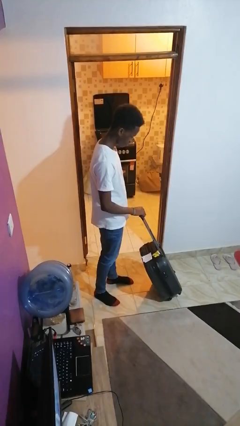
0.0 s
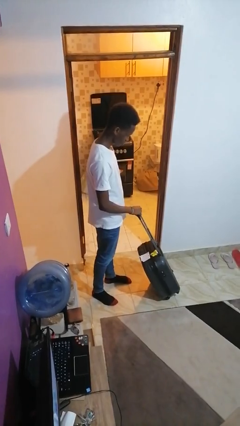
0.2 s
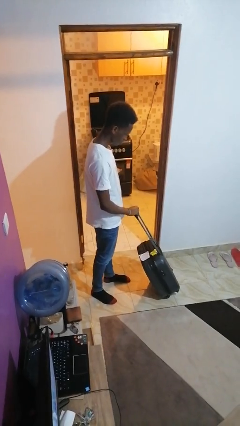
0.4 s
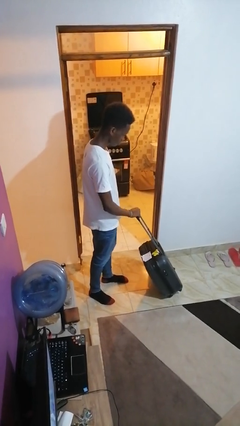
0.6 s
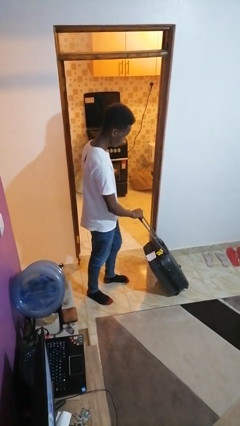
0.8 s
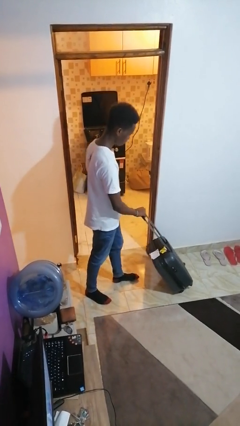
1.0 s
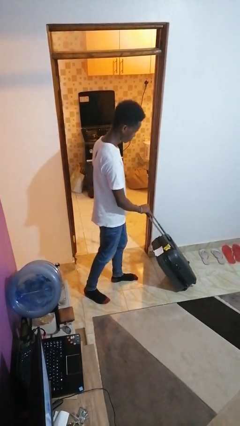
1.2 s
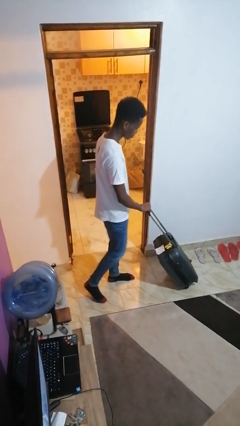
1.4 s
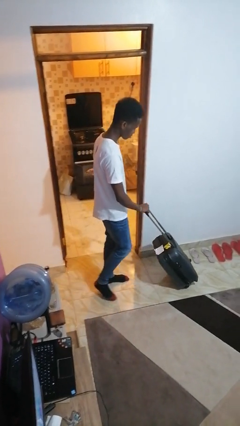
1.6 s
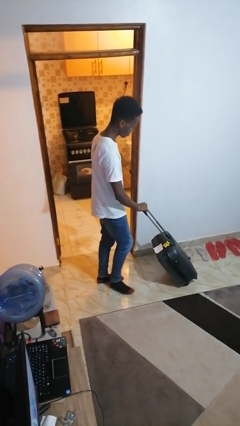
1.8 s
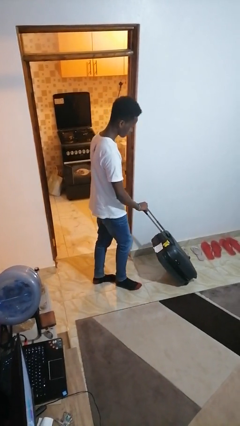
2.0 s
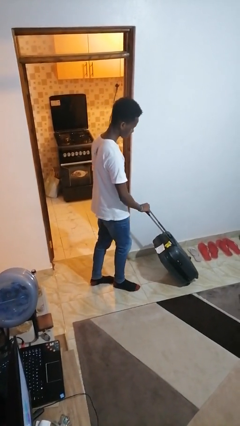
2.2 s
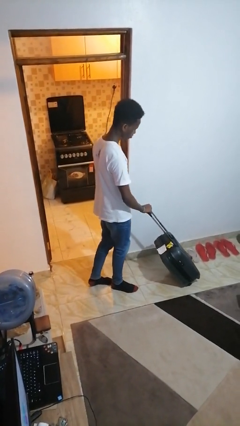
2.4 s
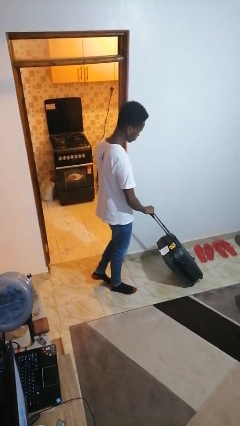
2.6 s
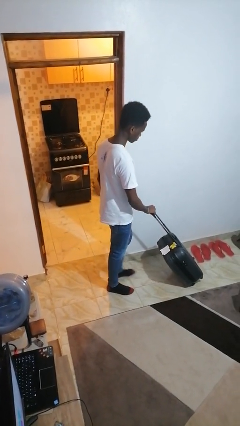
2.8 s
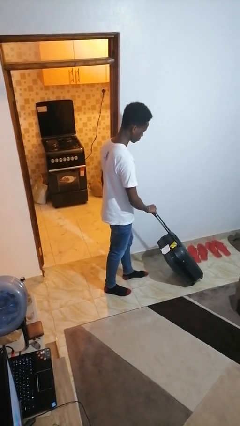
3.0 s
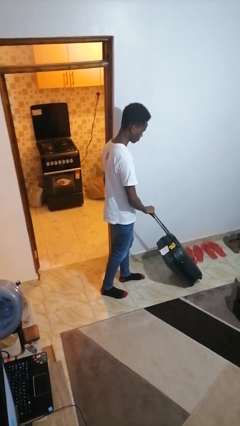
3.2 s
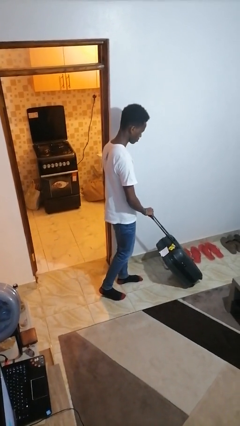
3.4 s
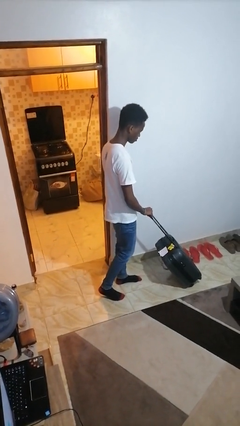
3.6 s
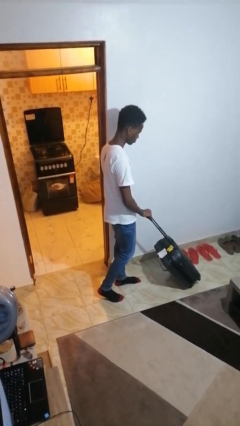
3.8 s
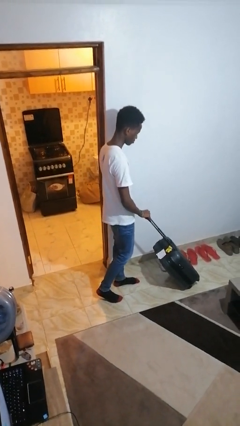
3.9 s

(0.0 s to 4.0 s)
person pushes wheeled cart

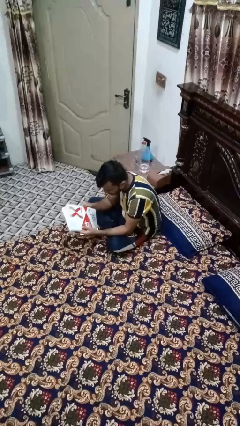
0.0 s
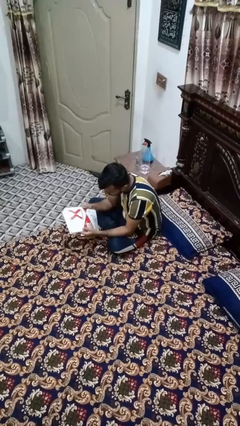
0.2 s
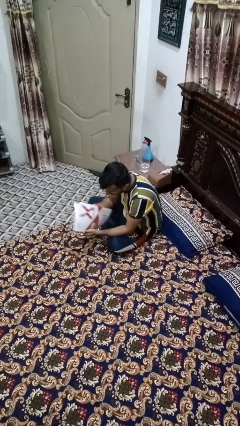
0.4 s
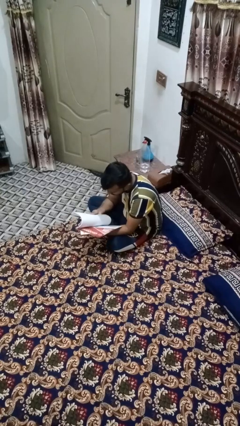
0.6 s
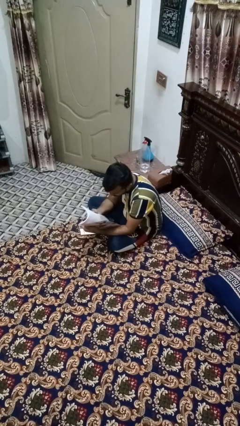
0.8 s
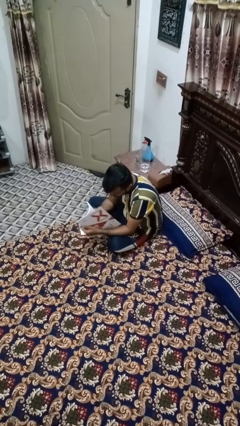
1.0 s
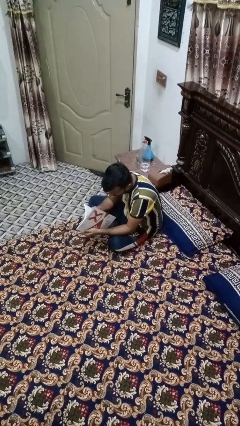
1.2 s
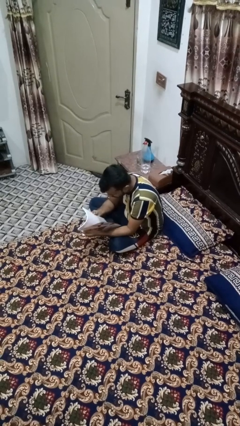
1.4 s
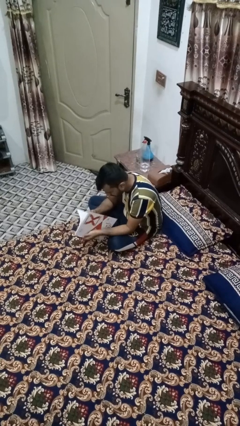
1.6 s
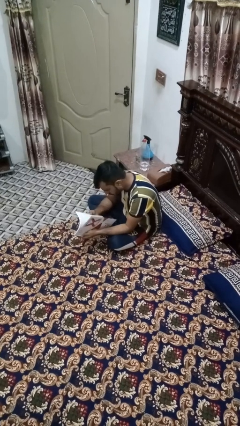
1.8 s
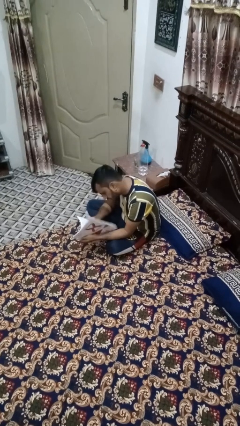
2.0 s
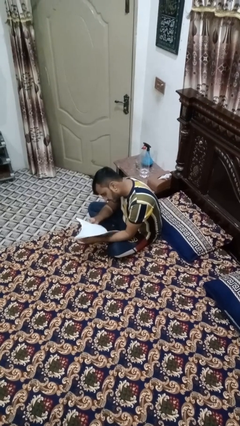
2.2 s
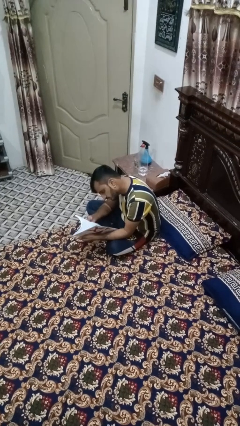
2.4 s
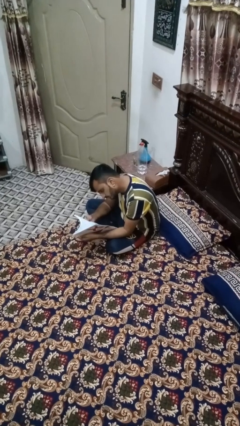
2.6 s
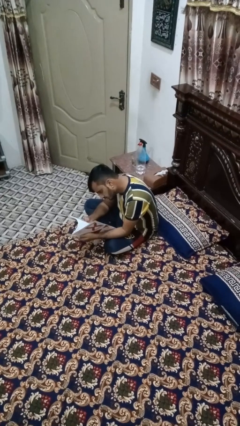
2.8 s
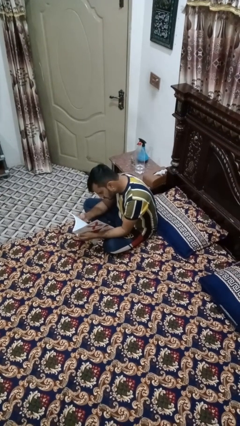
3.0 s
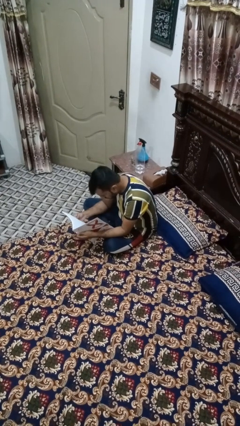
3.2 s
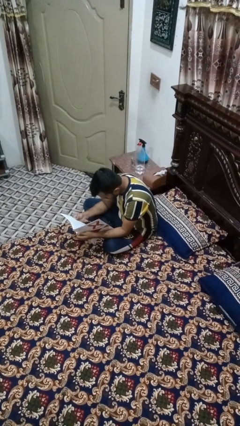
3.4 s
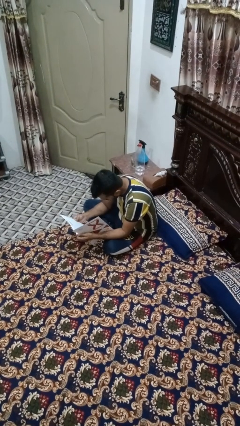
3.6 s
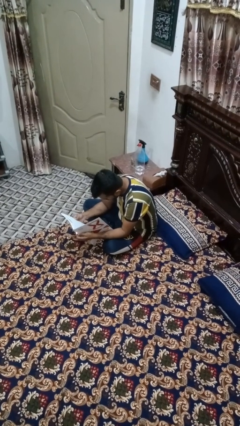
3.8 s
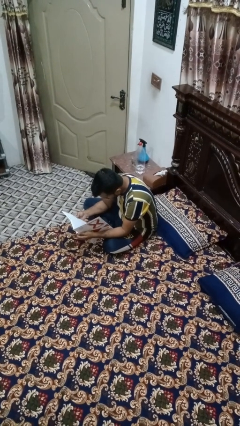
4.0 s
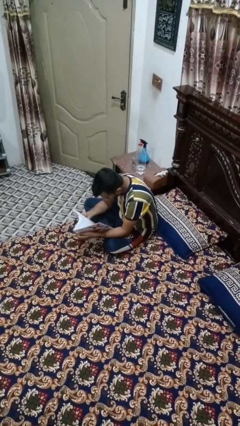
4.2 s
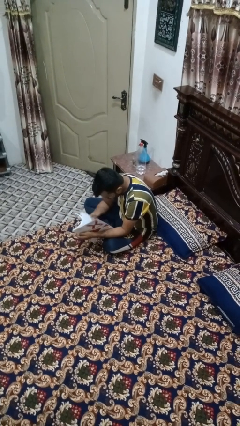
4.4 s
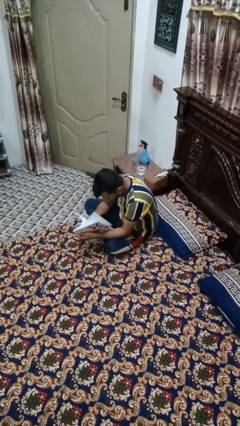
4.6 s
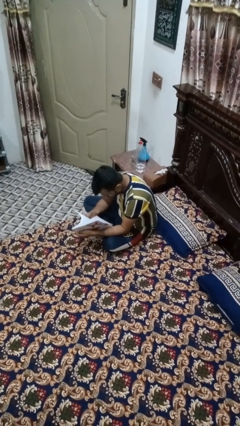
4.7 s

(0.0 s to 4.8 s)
person reads magazine

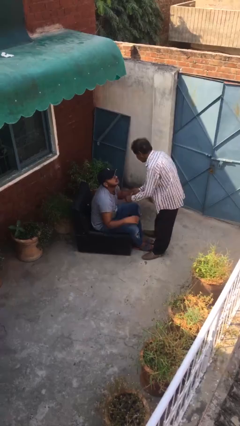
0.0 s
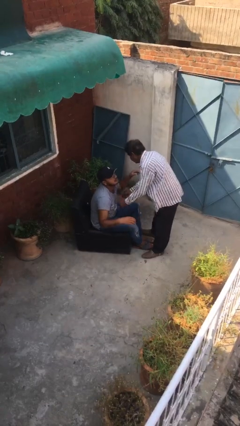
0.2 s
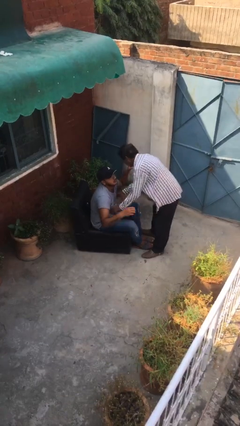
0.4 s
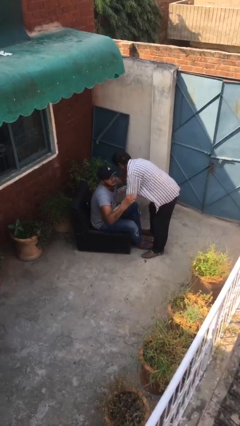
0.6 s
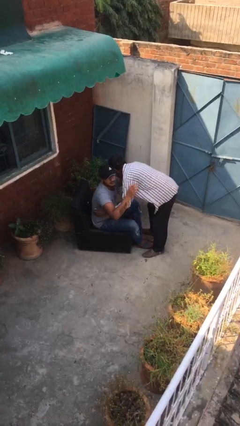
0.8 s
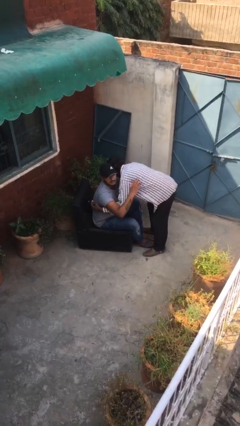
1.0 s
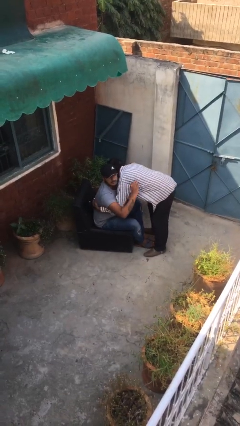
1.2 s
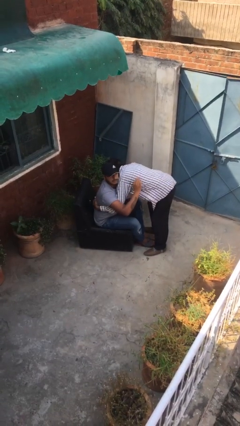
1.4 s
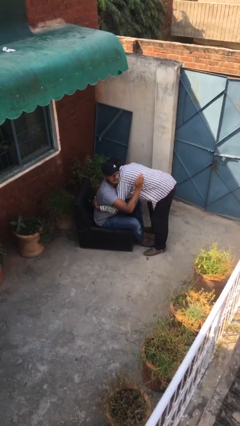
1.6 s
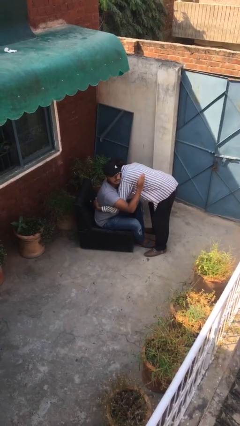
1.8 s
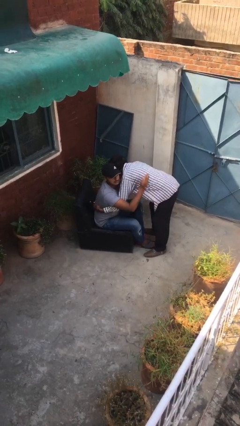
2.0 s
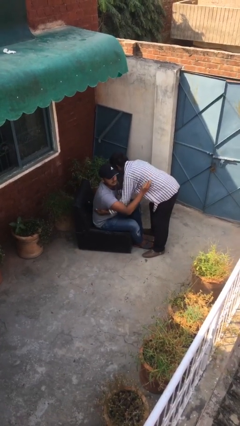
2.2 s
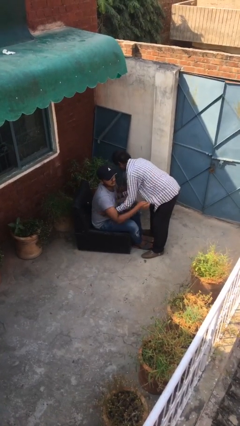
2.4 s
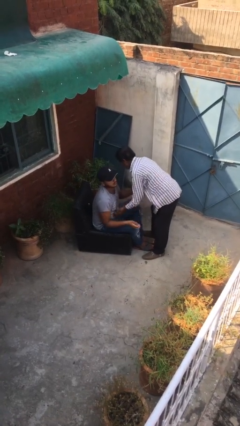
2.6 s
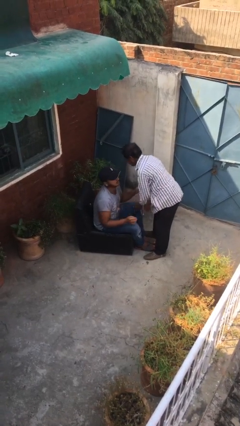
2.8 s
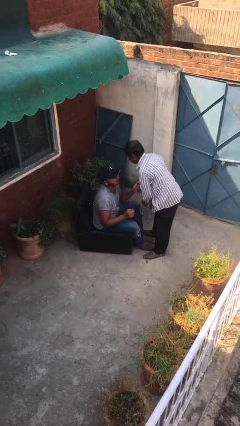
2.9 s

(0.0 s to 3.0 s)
person embraces person

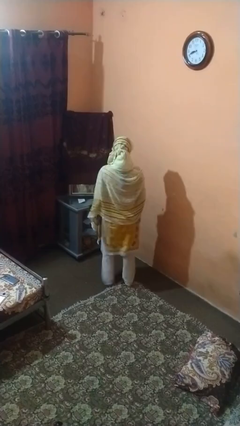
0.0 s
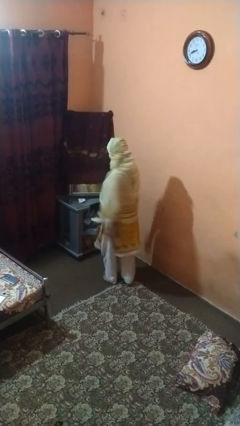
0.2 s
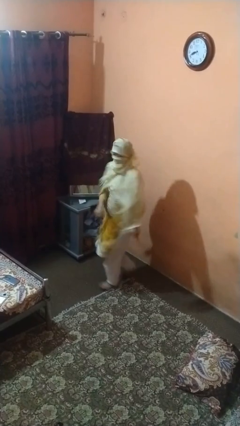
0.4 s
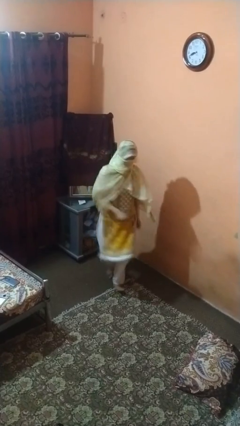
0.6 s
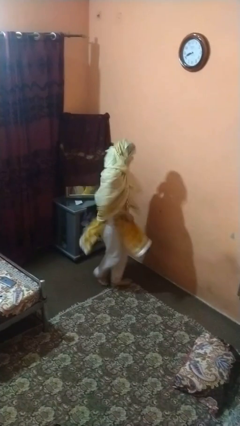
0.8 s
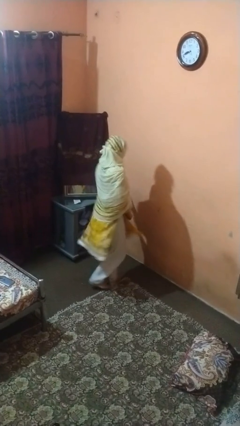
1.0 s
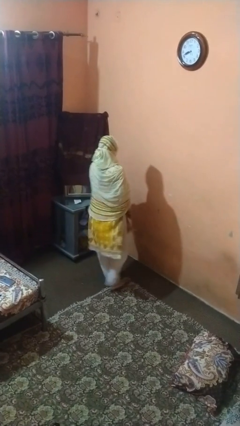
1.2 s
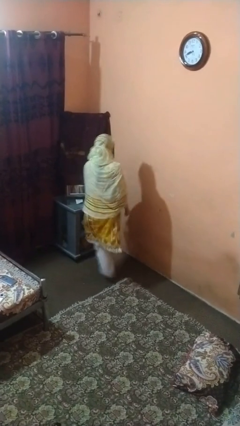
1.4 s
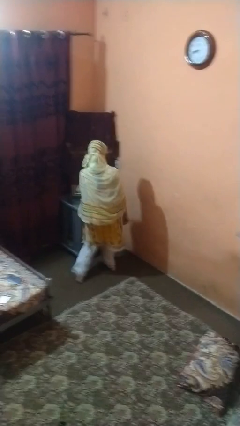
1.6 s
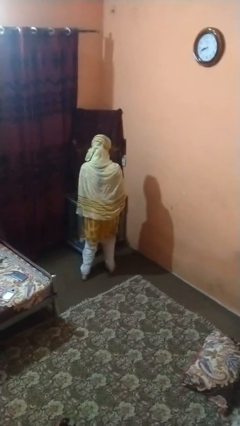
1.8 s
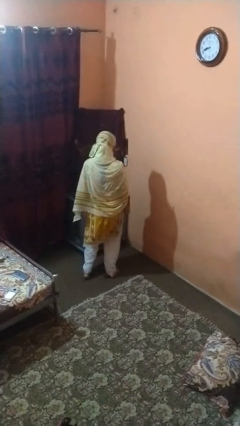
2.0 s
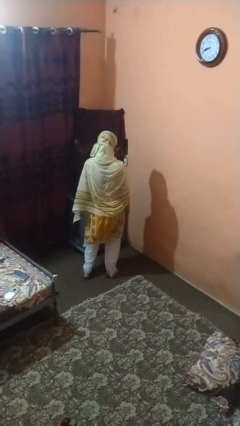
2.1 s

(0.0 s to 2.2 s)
person twirls

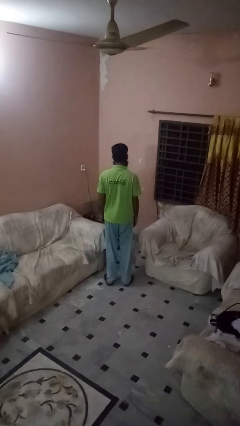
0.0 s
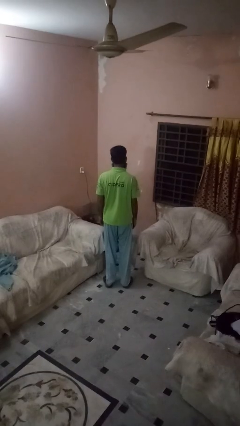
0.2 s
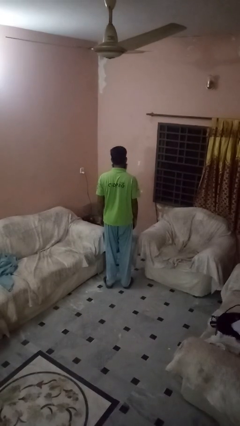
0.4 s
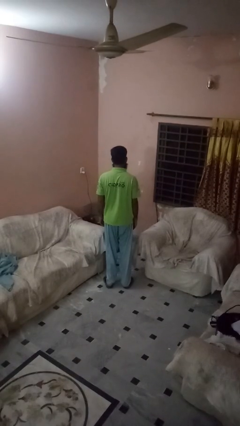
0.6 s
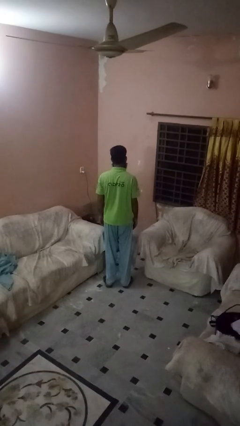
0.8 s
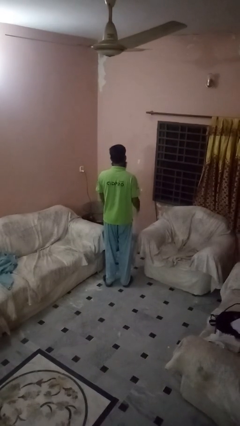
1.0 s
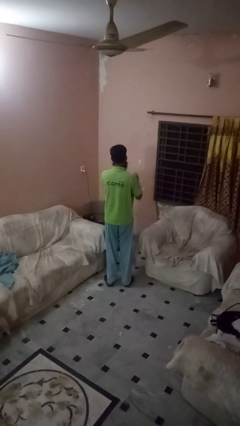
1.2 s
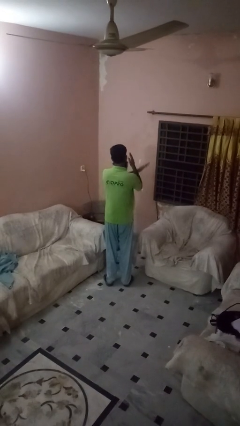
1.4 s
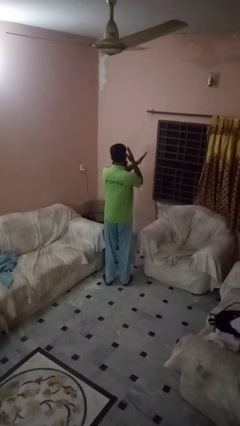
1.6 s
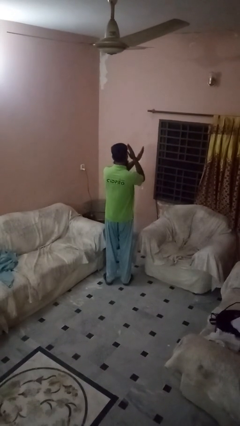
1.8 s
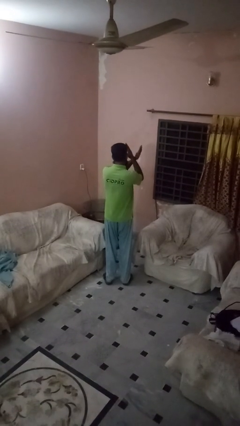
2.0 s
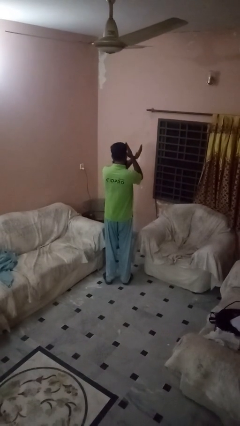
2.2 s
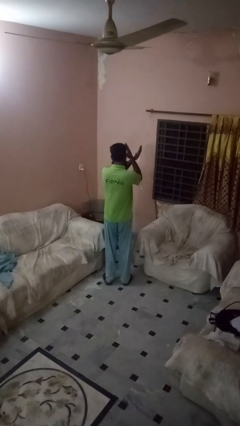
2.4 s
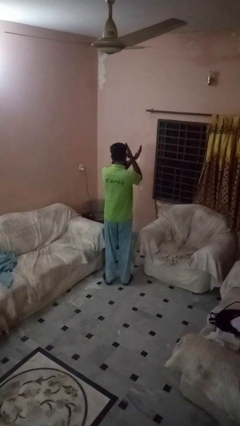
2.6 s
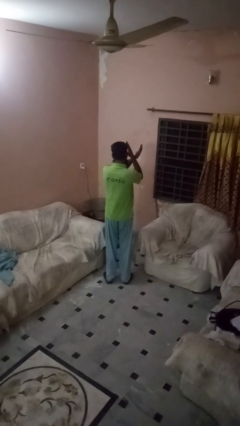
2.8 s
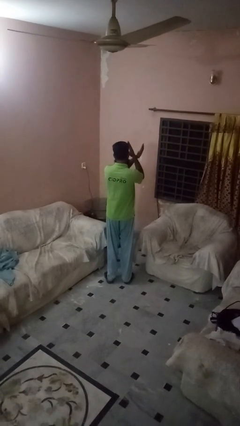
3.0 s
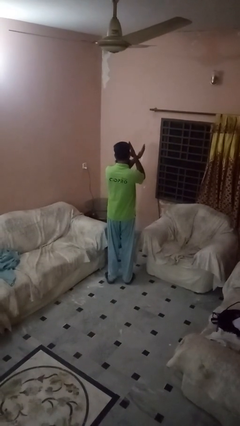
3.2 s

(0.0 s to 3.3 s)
person gestures arms x
